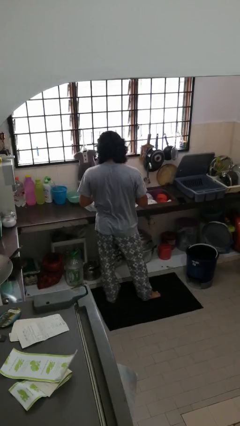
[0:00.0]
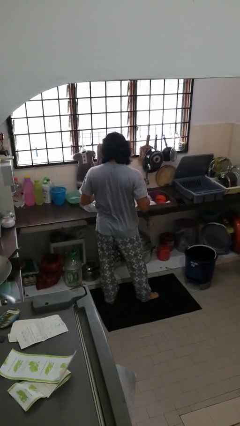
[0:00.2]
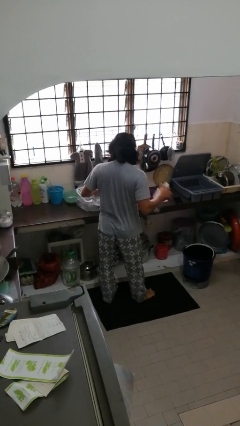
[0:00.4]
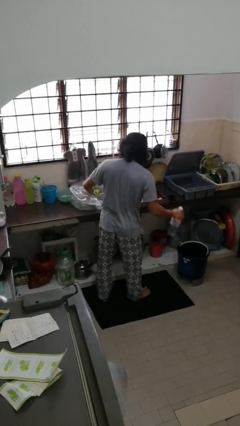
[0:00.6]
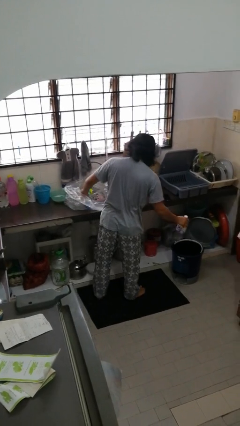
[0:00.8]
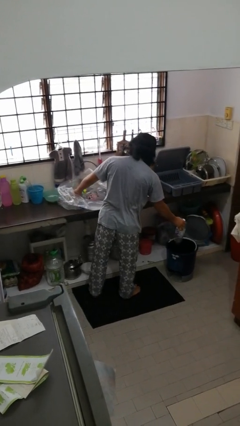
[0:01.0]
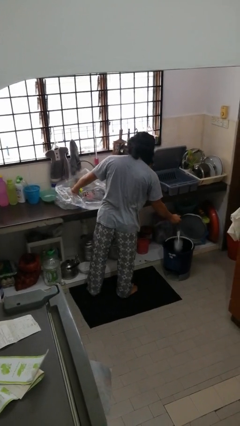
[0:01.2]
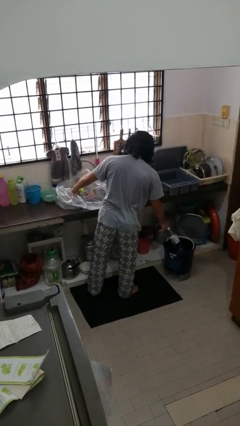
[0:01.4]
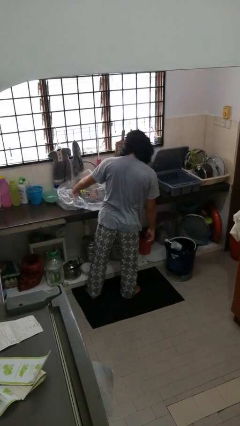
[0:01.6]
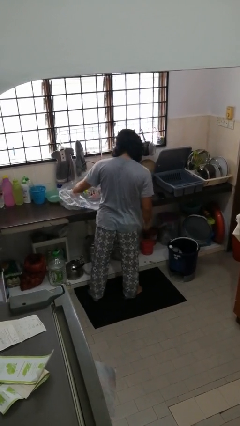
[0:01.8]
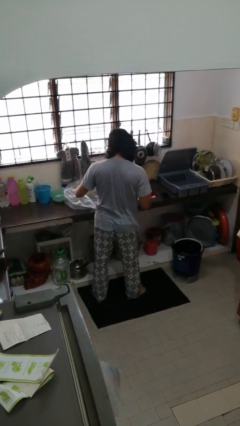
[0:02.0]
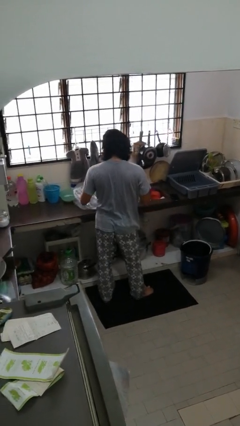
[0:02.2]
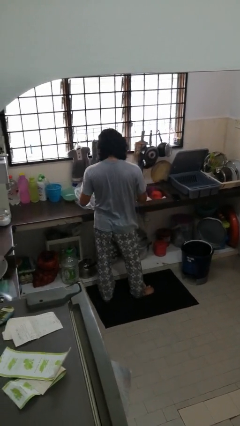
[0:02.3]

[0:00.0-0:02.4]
person discards trash

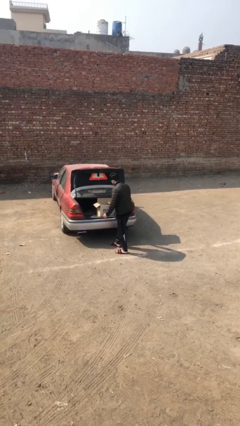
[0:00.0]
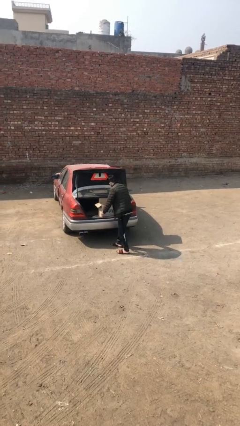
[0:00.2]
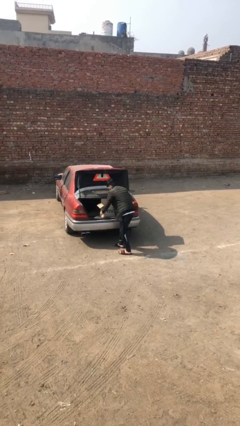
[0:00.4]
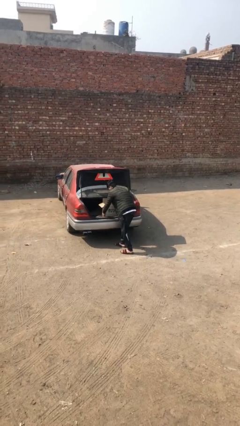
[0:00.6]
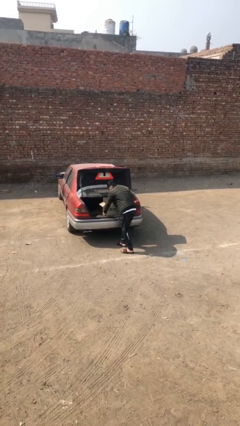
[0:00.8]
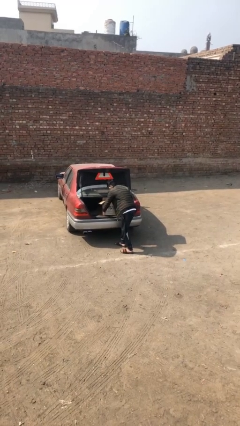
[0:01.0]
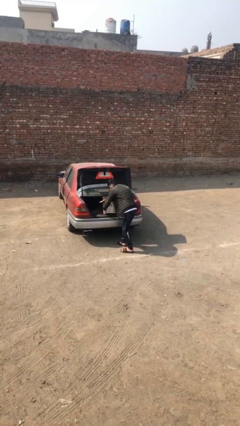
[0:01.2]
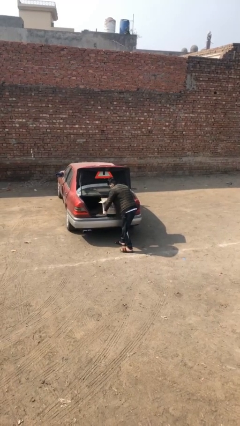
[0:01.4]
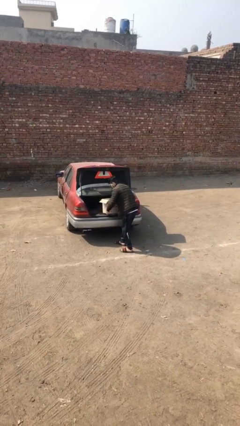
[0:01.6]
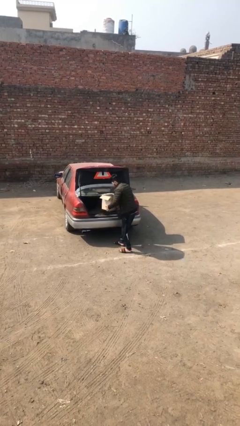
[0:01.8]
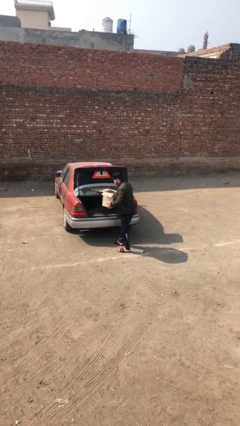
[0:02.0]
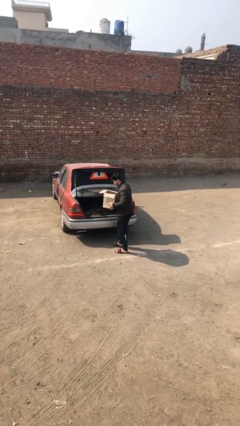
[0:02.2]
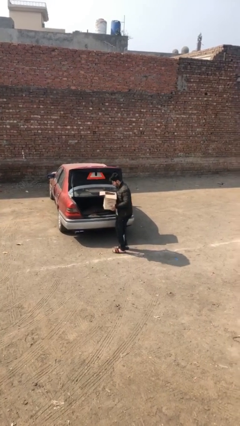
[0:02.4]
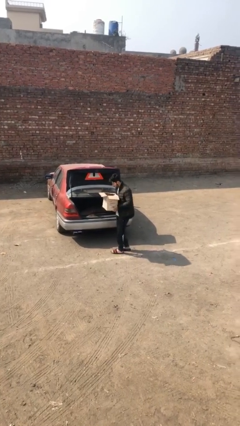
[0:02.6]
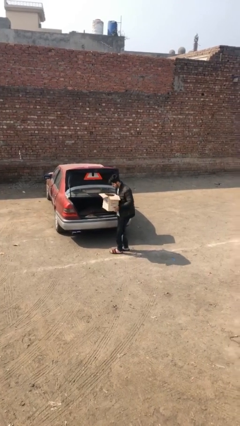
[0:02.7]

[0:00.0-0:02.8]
person unloads car

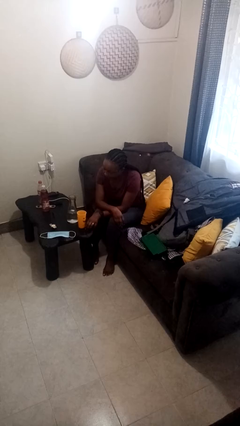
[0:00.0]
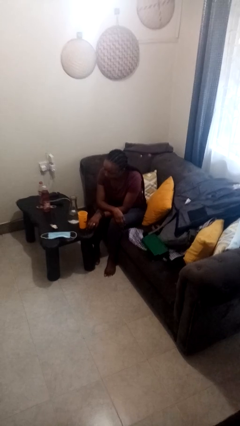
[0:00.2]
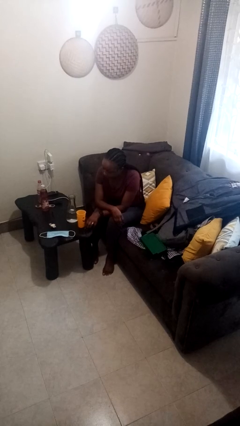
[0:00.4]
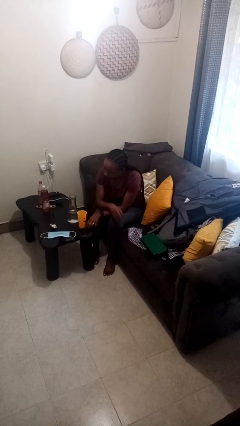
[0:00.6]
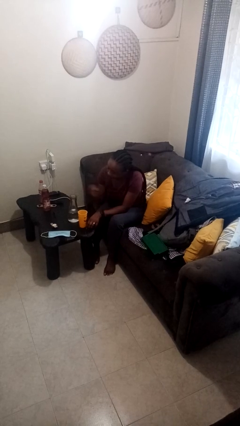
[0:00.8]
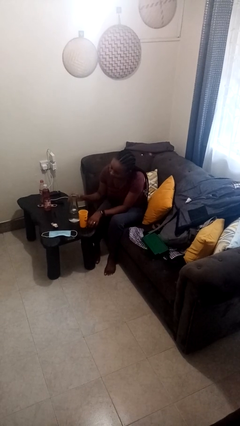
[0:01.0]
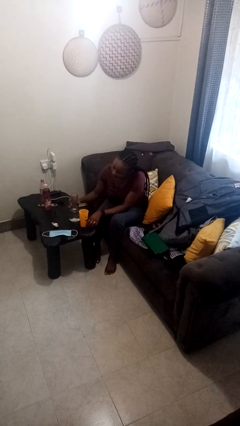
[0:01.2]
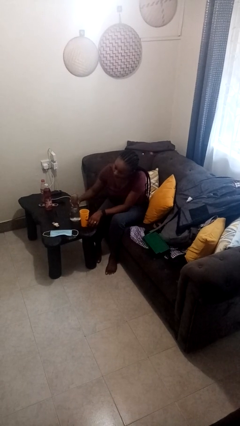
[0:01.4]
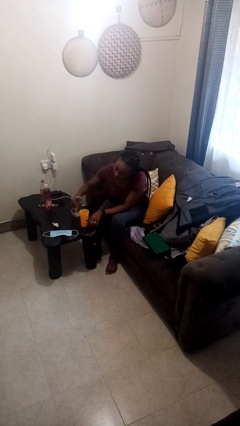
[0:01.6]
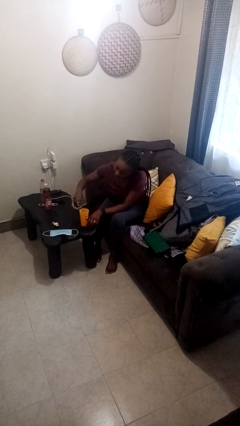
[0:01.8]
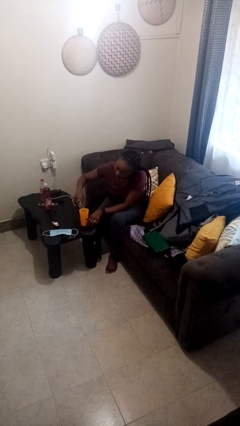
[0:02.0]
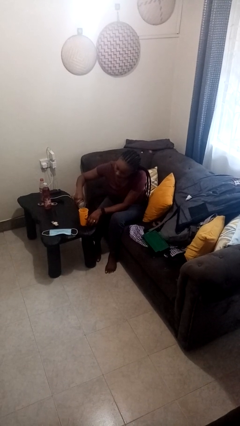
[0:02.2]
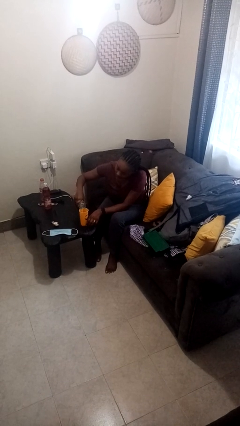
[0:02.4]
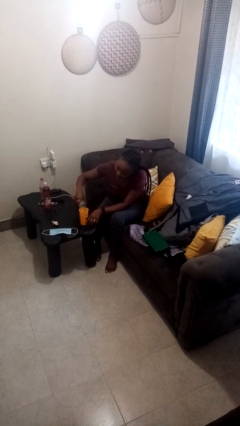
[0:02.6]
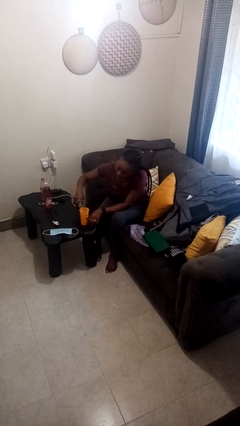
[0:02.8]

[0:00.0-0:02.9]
person pours liquid into cup

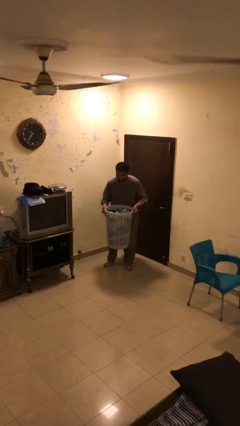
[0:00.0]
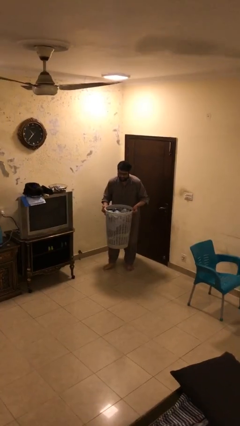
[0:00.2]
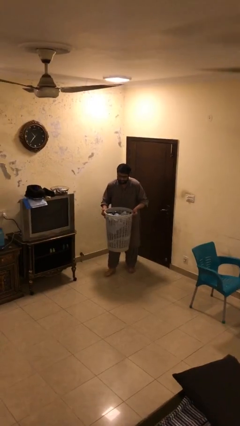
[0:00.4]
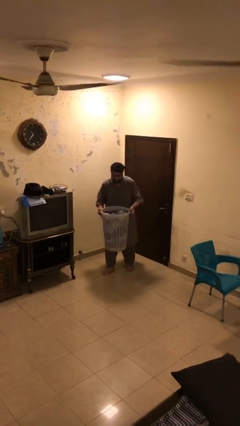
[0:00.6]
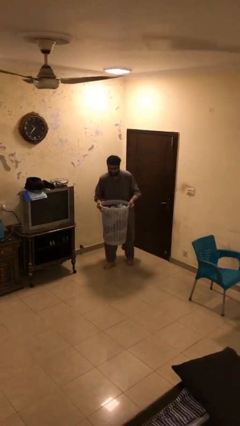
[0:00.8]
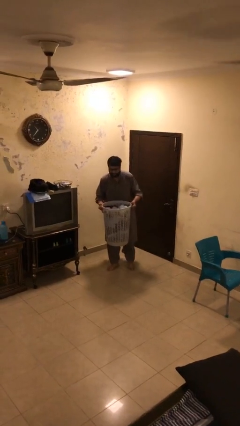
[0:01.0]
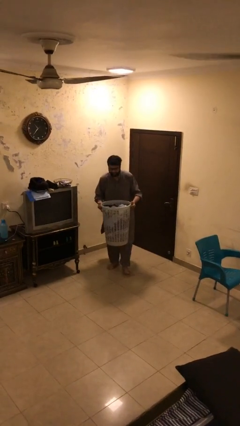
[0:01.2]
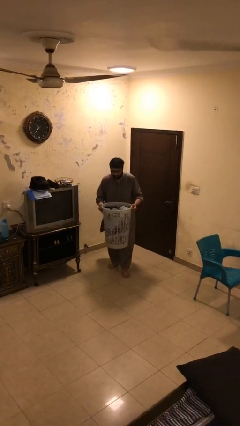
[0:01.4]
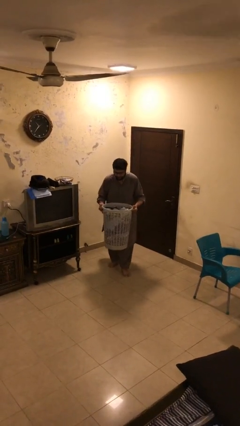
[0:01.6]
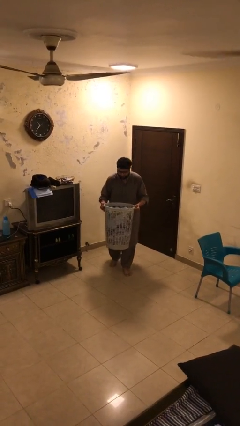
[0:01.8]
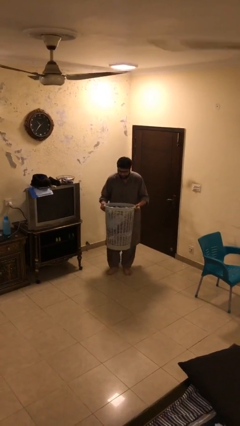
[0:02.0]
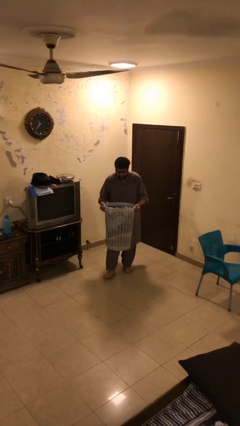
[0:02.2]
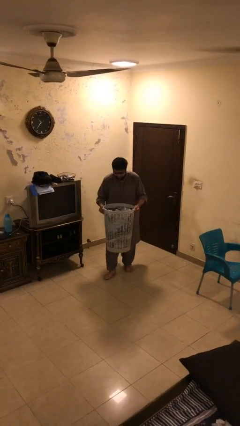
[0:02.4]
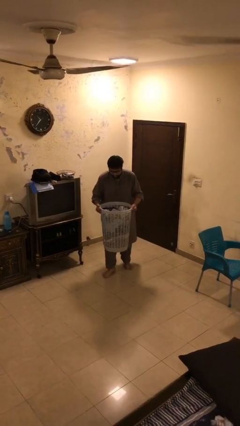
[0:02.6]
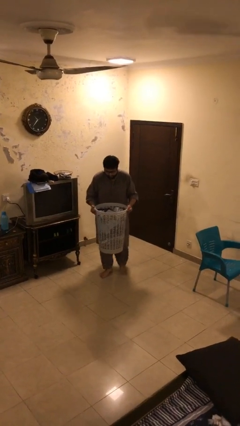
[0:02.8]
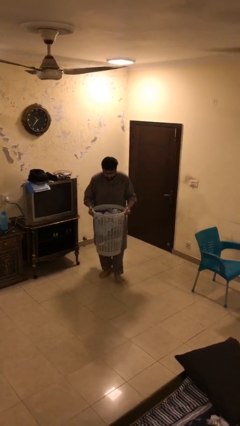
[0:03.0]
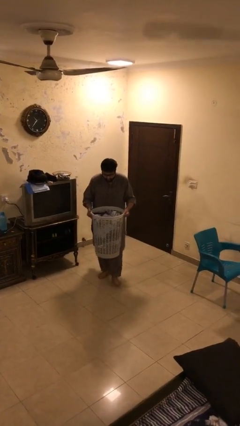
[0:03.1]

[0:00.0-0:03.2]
person carries heavy object

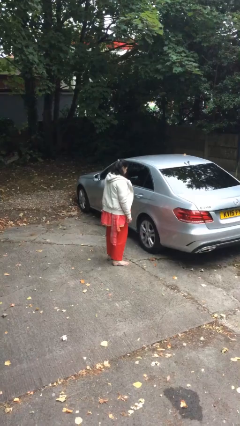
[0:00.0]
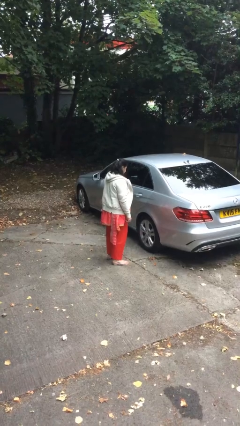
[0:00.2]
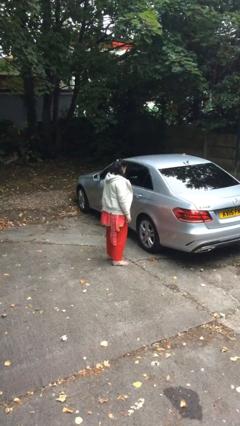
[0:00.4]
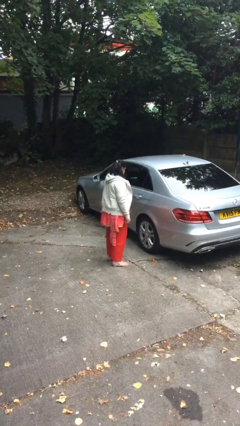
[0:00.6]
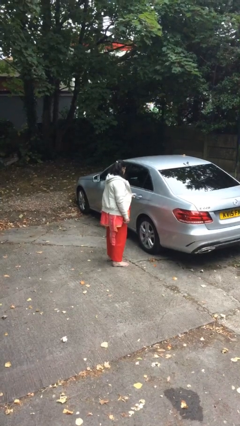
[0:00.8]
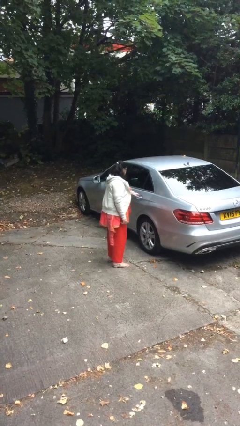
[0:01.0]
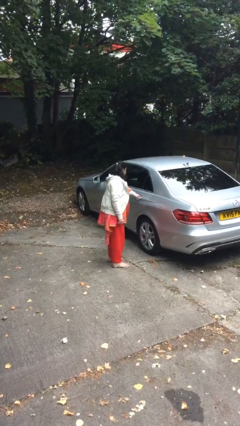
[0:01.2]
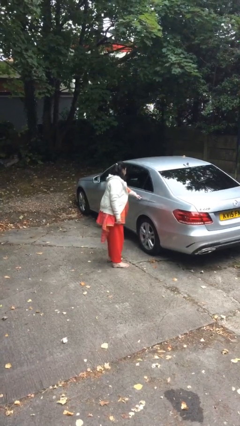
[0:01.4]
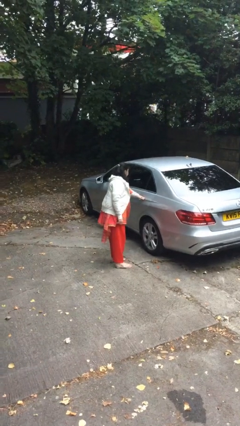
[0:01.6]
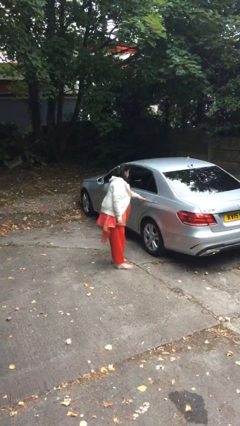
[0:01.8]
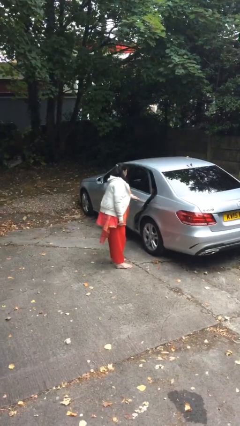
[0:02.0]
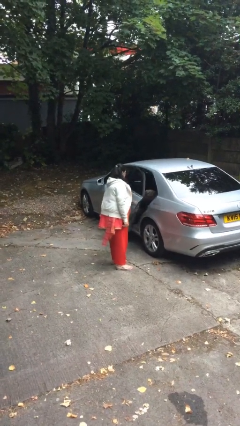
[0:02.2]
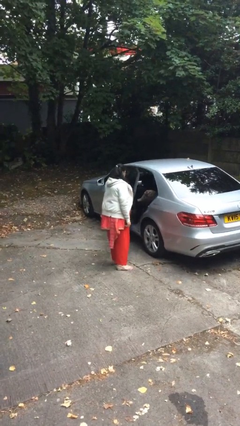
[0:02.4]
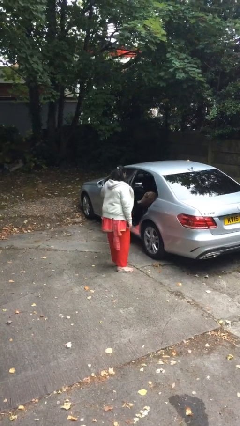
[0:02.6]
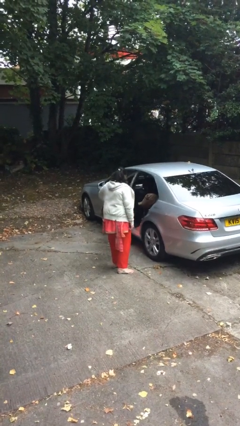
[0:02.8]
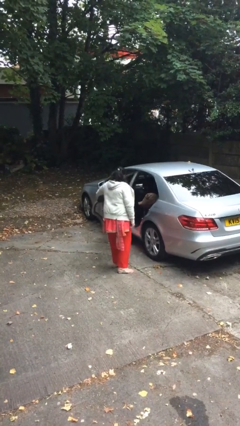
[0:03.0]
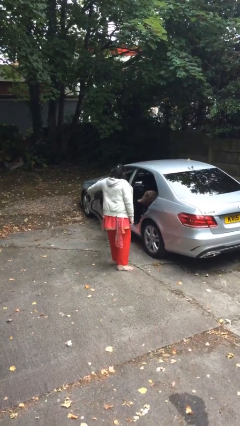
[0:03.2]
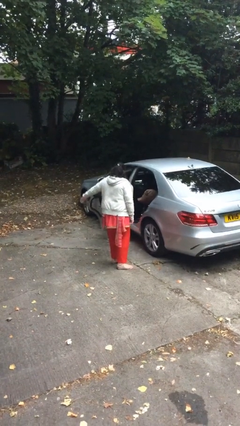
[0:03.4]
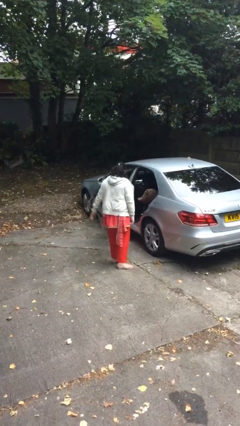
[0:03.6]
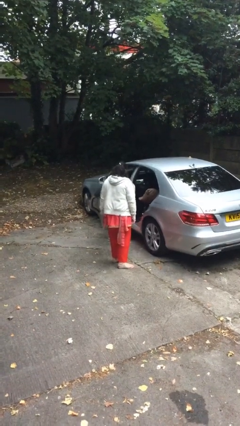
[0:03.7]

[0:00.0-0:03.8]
person opens car door

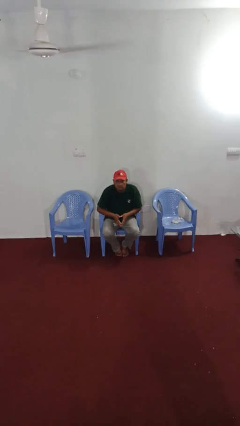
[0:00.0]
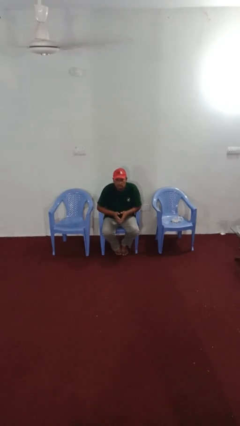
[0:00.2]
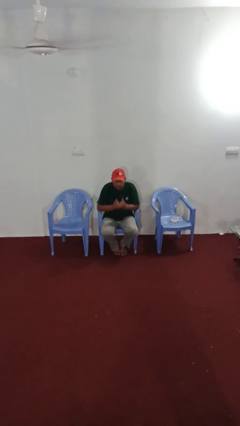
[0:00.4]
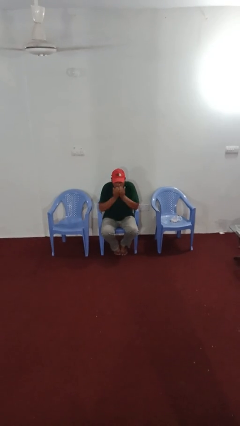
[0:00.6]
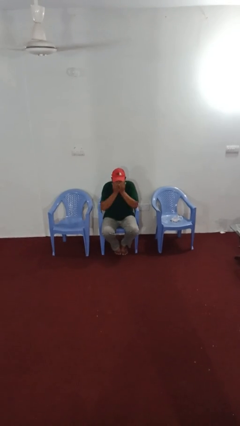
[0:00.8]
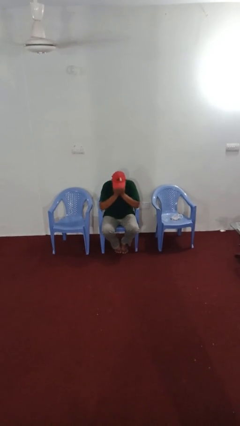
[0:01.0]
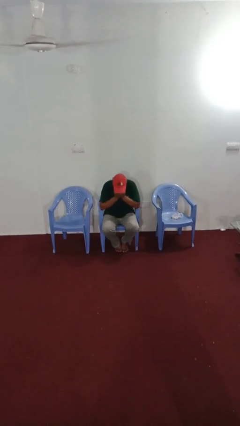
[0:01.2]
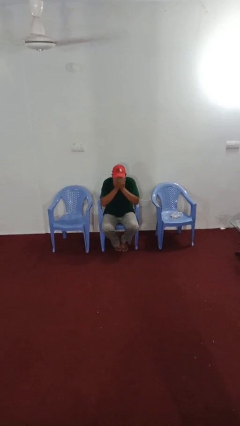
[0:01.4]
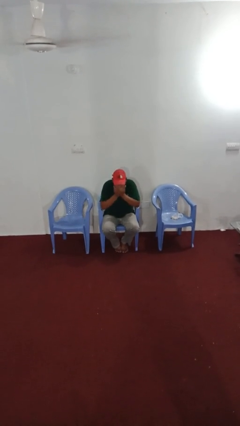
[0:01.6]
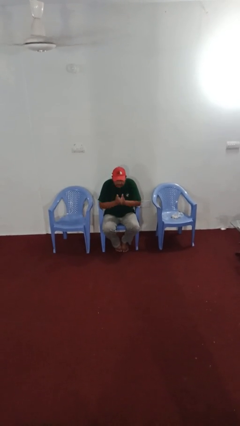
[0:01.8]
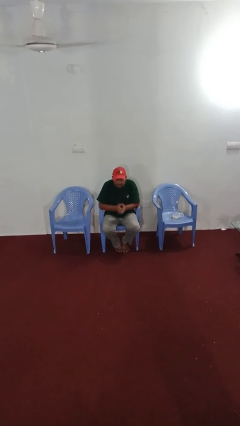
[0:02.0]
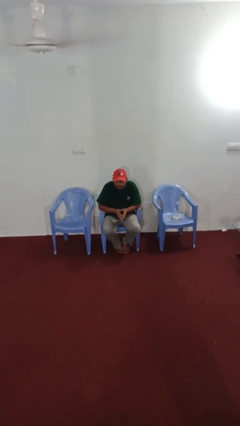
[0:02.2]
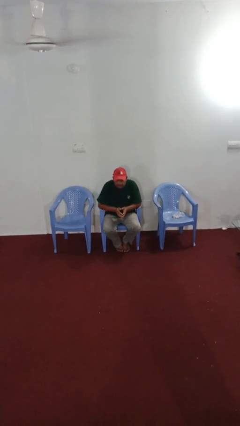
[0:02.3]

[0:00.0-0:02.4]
person sneezes into hand
